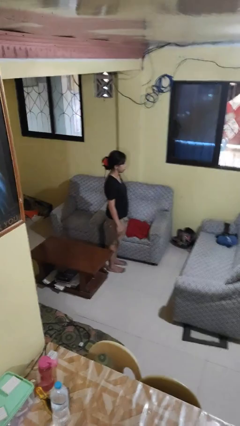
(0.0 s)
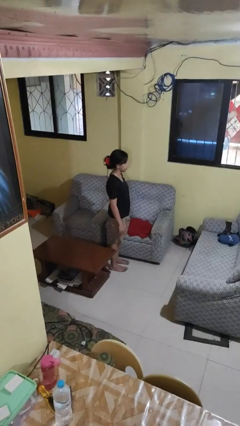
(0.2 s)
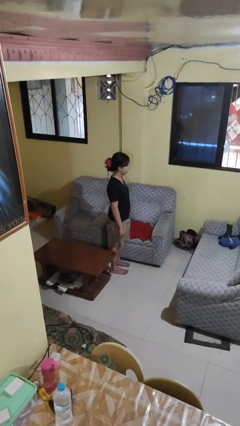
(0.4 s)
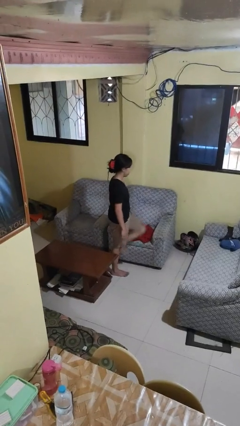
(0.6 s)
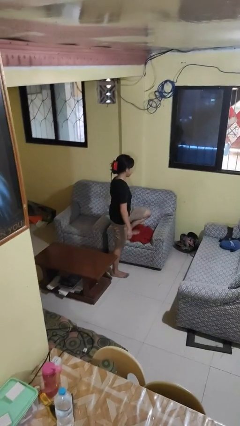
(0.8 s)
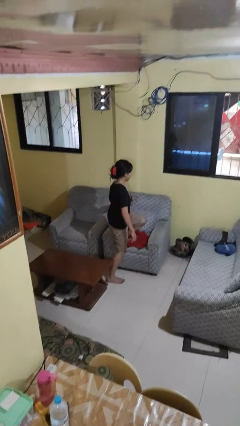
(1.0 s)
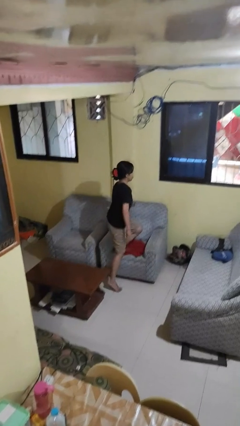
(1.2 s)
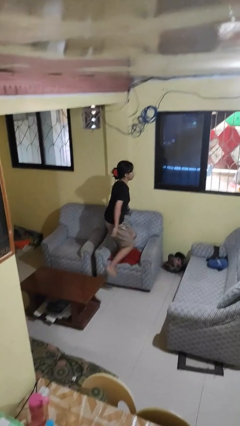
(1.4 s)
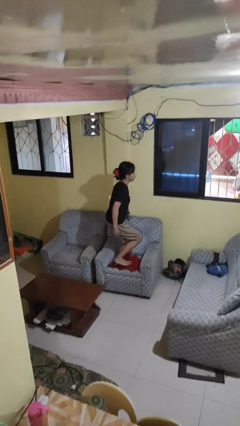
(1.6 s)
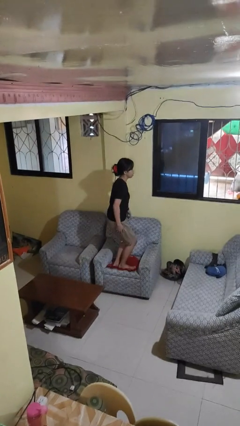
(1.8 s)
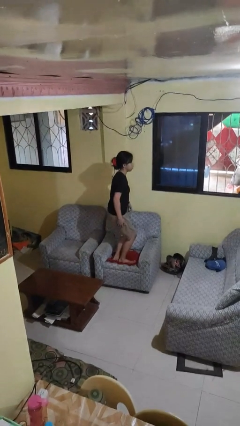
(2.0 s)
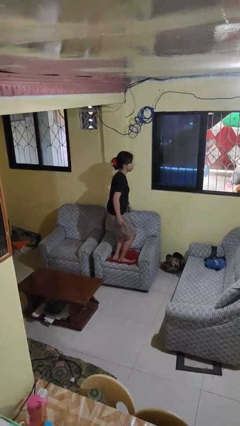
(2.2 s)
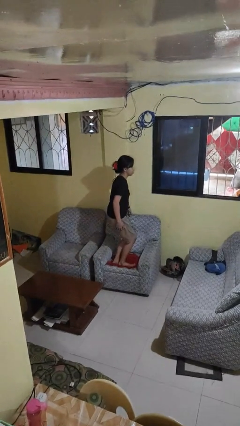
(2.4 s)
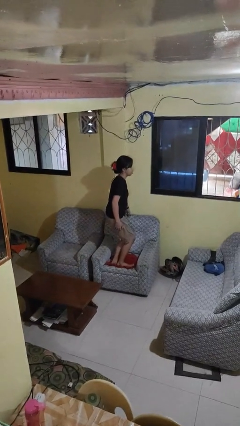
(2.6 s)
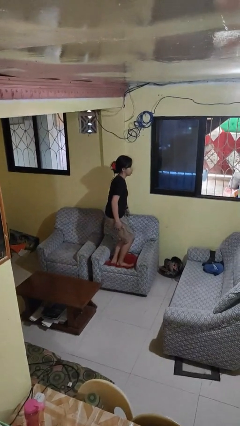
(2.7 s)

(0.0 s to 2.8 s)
person climbs on couch

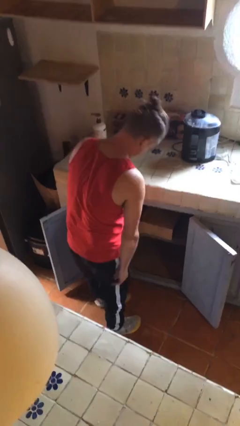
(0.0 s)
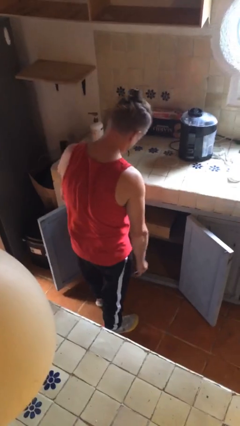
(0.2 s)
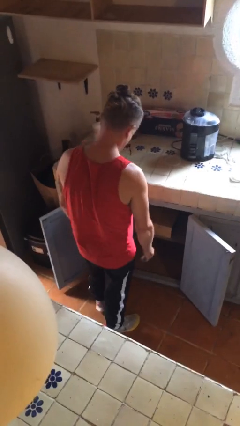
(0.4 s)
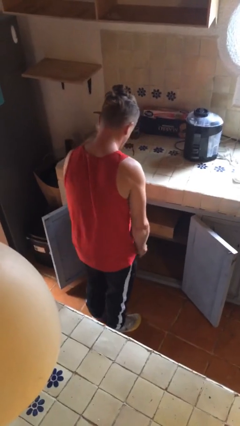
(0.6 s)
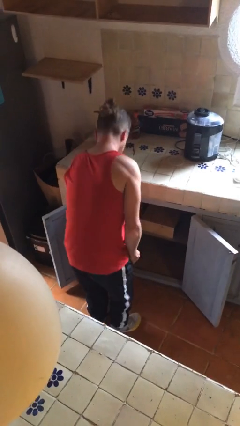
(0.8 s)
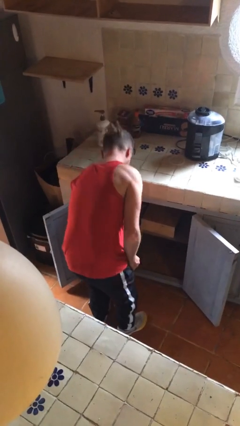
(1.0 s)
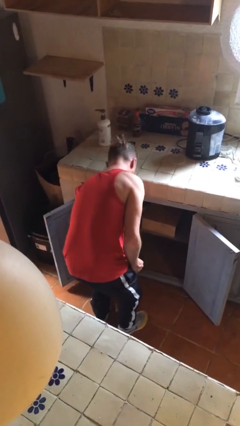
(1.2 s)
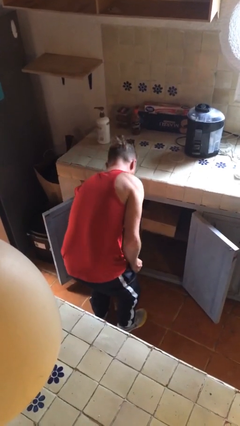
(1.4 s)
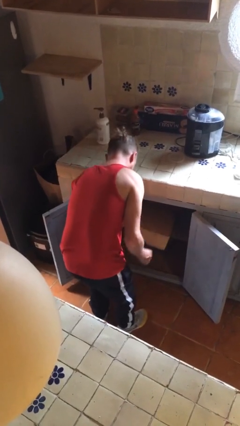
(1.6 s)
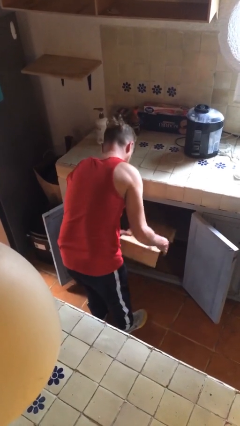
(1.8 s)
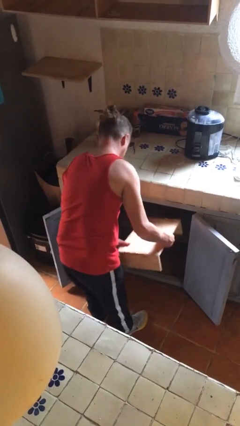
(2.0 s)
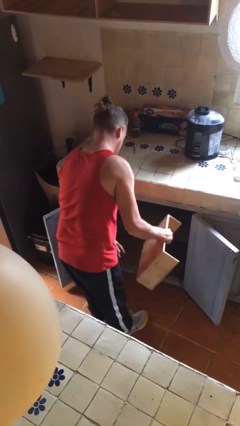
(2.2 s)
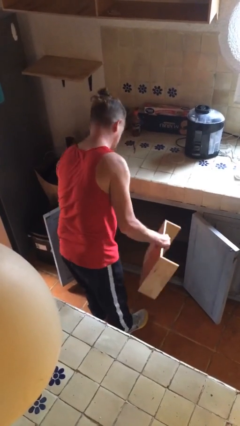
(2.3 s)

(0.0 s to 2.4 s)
person picks up object from cabinet

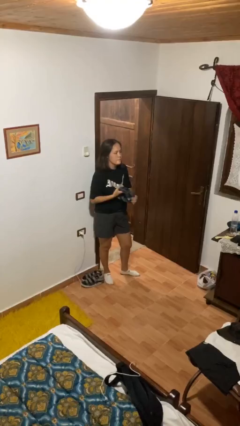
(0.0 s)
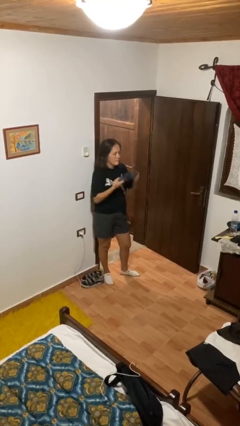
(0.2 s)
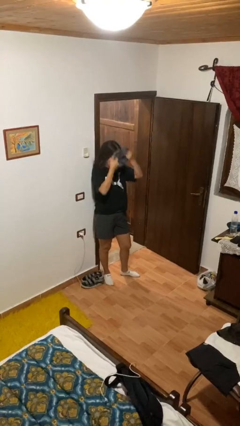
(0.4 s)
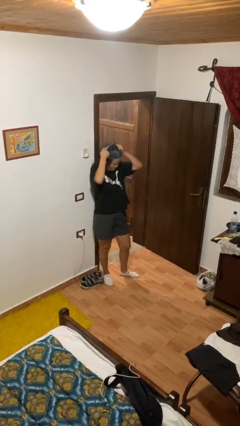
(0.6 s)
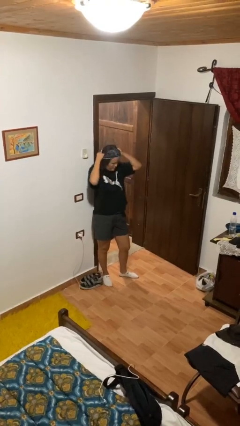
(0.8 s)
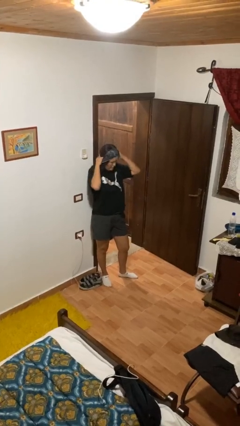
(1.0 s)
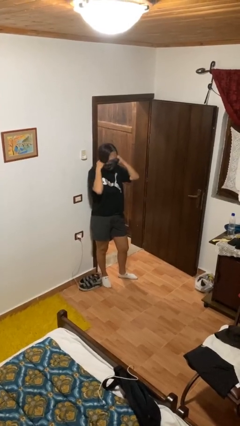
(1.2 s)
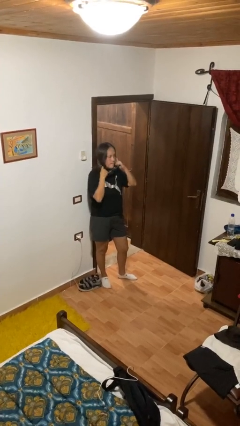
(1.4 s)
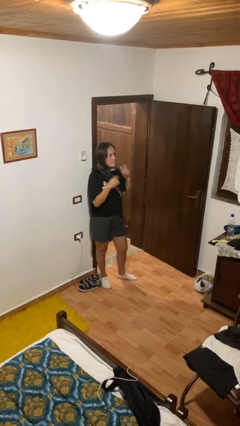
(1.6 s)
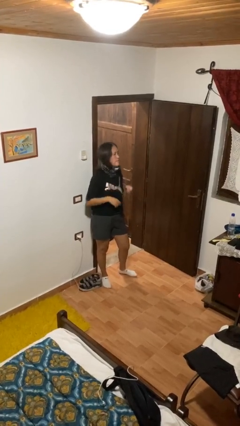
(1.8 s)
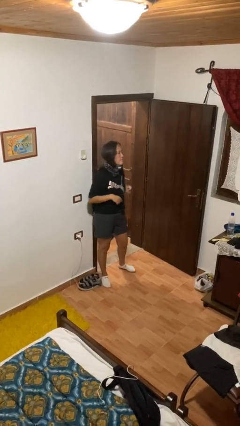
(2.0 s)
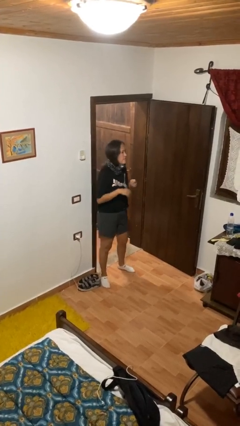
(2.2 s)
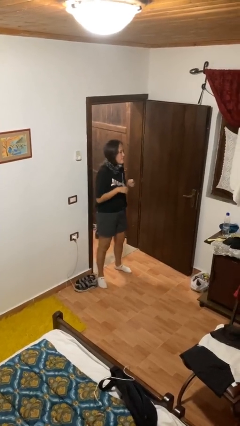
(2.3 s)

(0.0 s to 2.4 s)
person puts on scarf

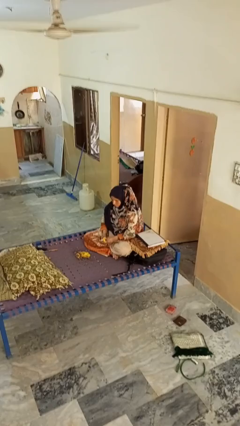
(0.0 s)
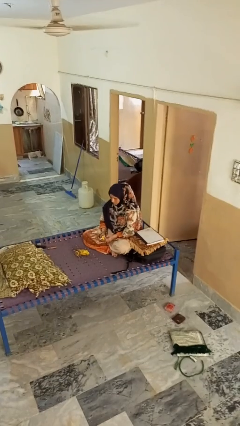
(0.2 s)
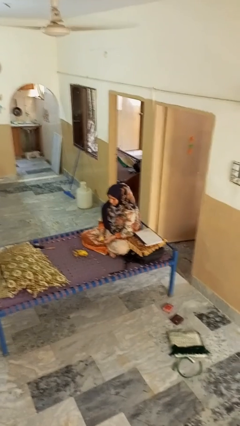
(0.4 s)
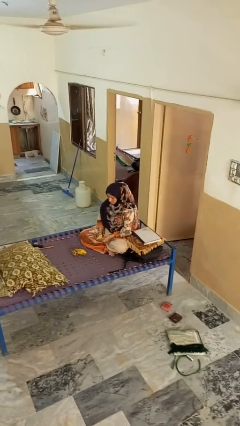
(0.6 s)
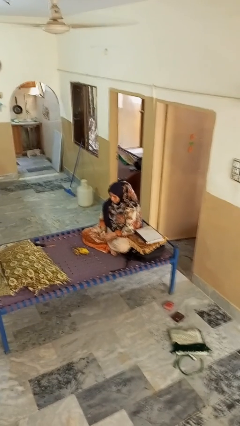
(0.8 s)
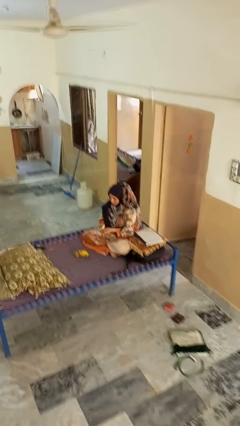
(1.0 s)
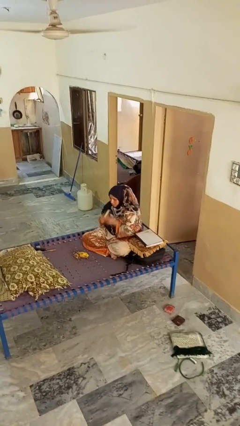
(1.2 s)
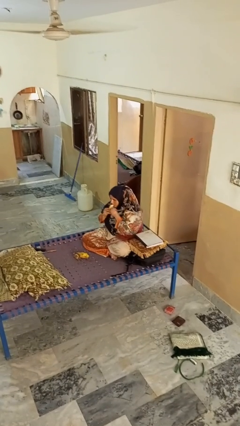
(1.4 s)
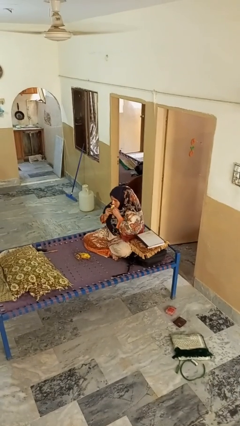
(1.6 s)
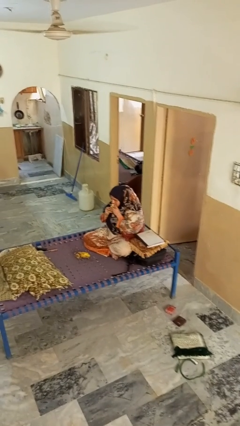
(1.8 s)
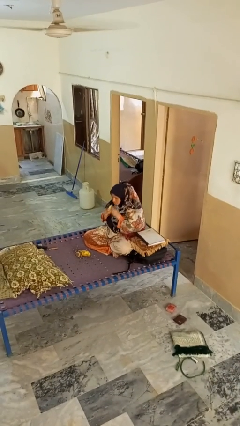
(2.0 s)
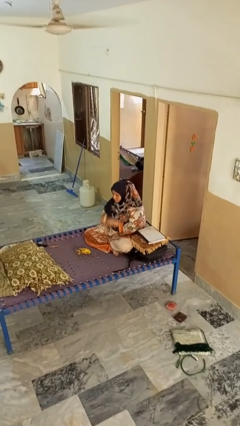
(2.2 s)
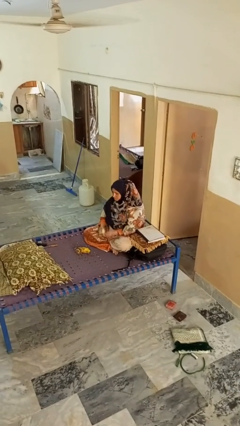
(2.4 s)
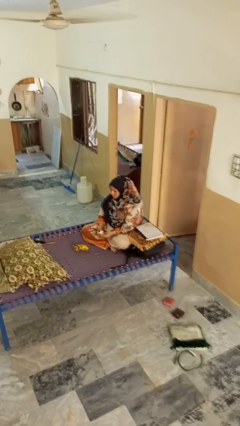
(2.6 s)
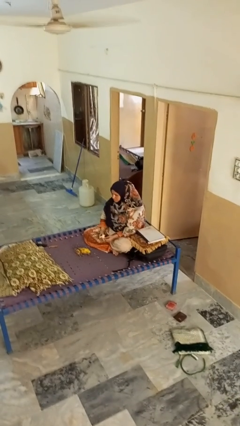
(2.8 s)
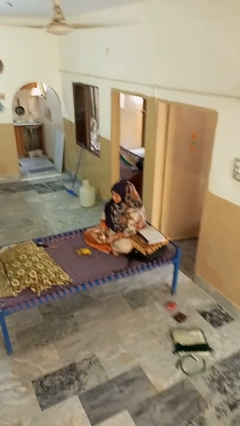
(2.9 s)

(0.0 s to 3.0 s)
person eats banana

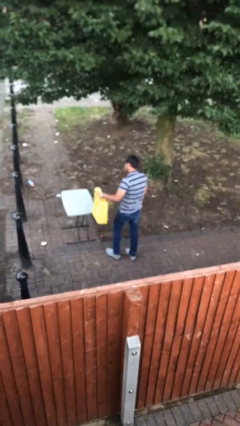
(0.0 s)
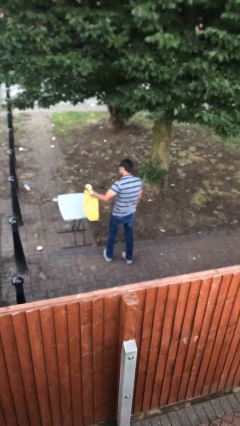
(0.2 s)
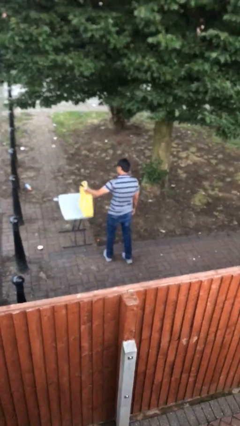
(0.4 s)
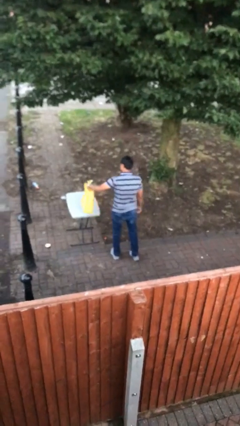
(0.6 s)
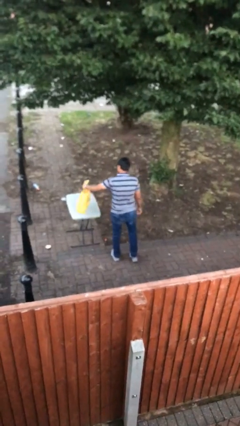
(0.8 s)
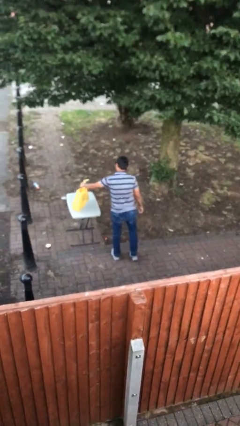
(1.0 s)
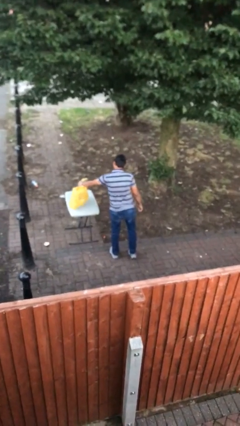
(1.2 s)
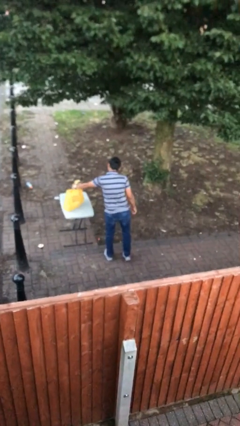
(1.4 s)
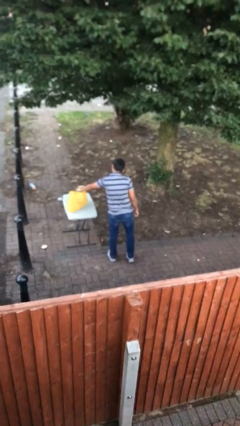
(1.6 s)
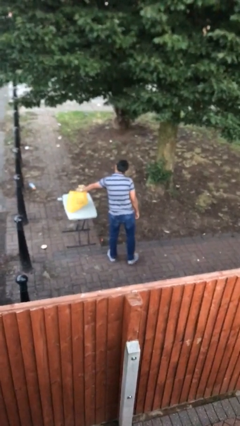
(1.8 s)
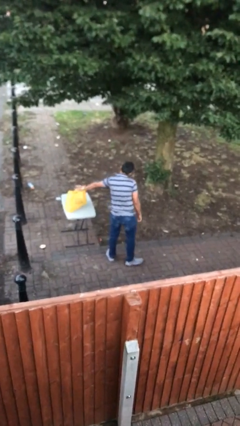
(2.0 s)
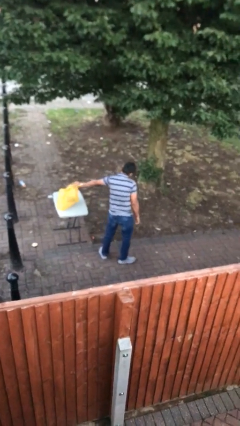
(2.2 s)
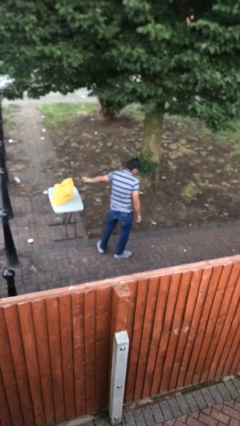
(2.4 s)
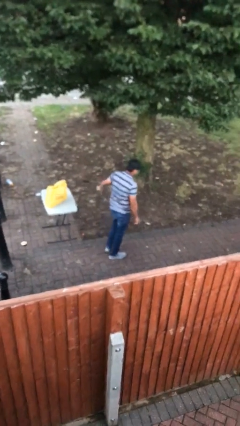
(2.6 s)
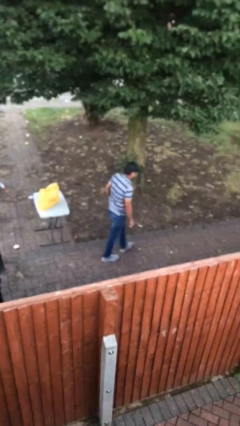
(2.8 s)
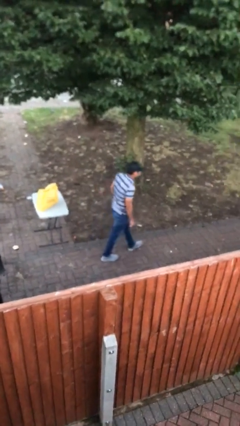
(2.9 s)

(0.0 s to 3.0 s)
person puts down object on table

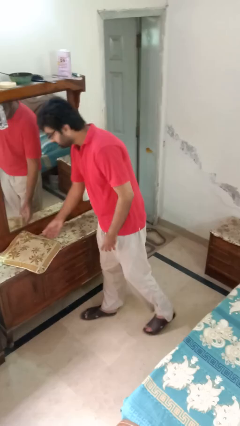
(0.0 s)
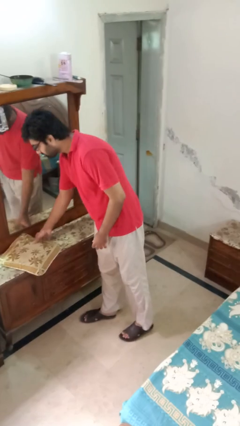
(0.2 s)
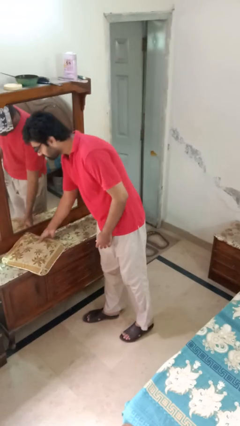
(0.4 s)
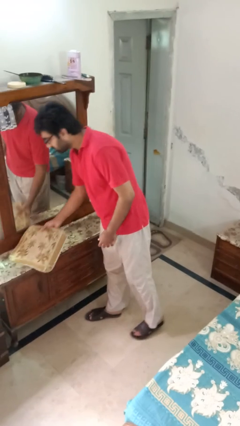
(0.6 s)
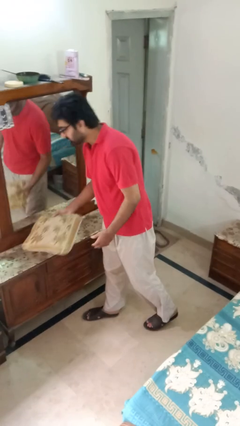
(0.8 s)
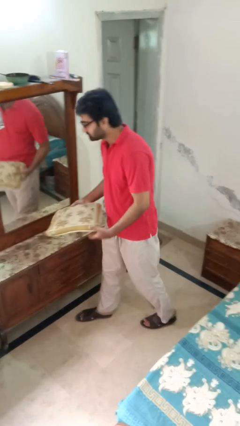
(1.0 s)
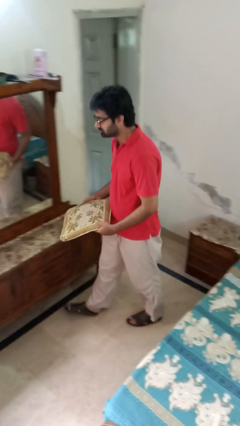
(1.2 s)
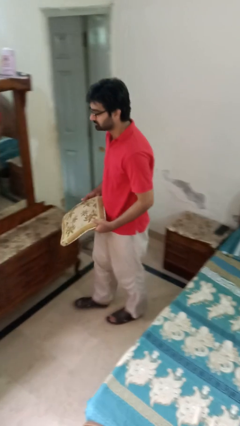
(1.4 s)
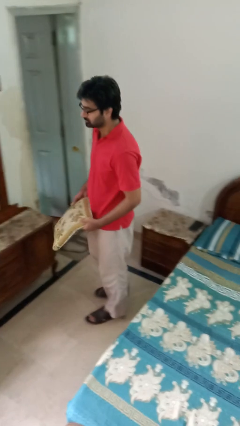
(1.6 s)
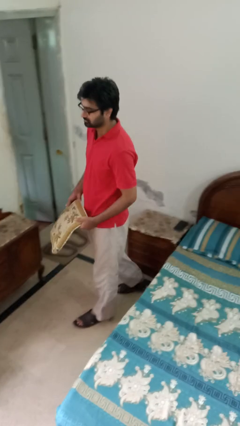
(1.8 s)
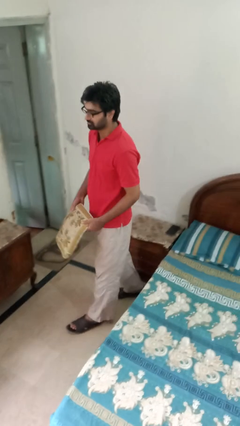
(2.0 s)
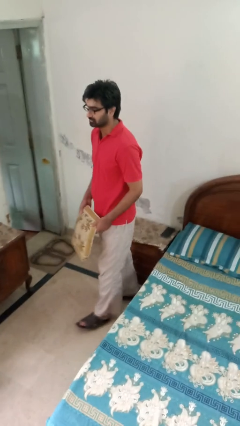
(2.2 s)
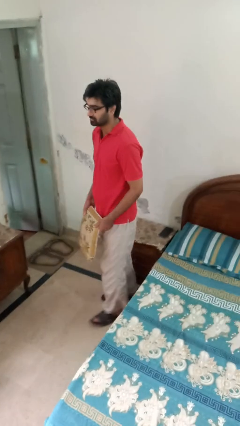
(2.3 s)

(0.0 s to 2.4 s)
person picks up object from table

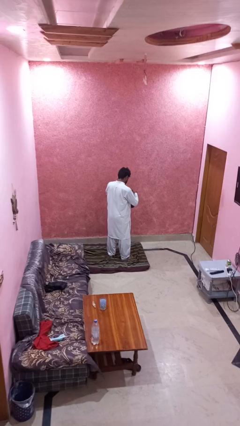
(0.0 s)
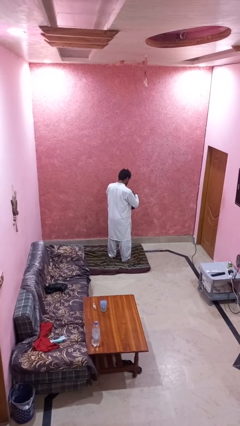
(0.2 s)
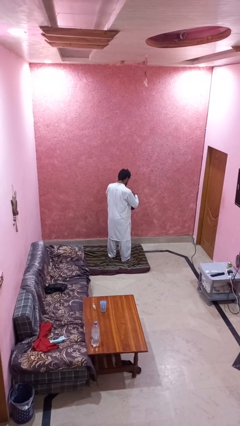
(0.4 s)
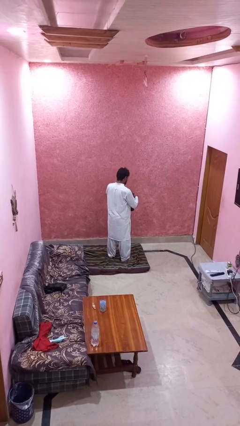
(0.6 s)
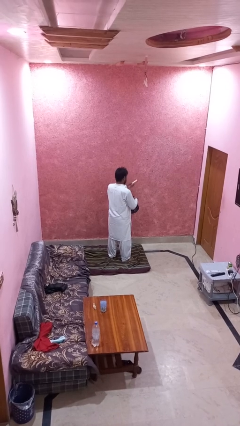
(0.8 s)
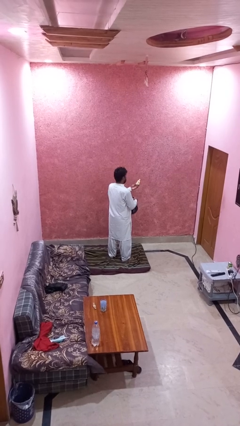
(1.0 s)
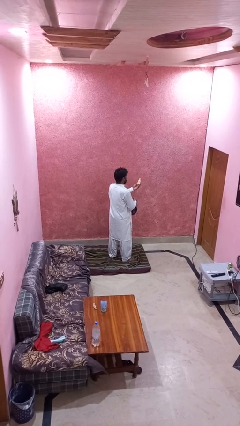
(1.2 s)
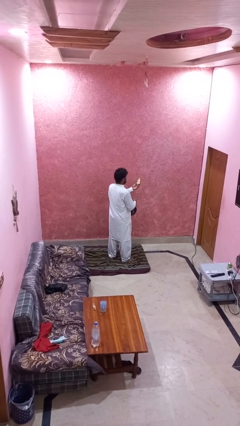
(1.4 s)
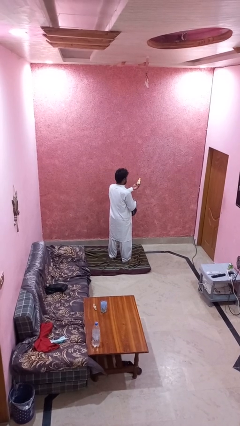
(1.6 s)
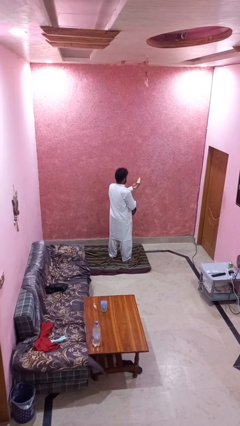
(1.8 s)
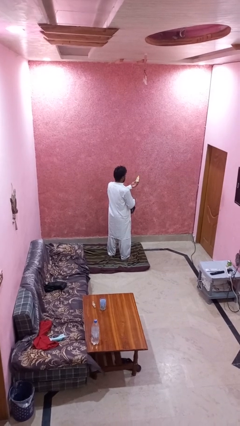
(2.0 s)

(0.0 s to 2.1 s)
person takes object from purse
